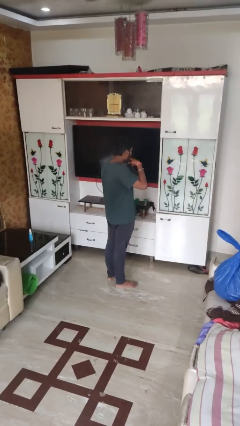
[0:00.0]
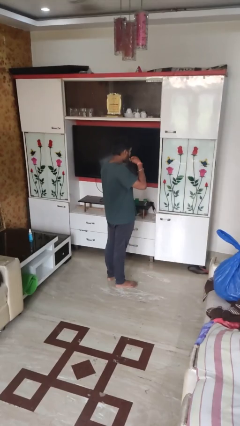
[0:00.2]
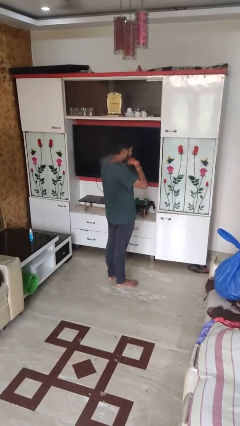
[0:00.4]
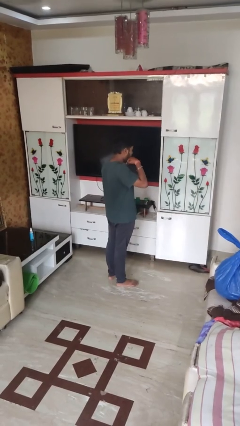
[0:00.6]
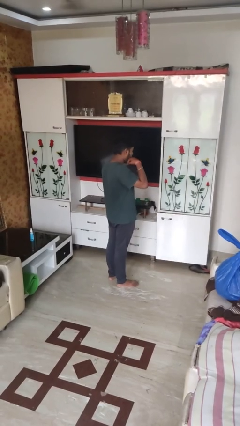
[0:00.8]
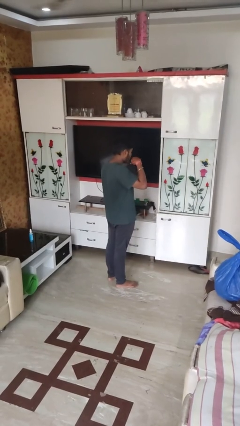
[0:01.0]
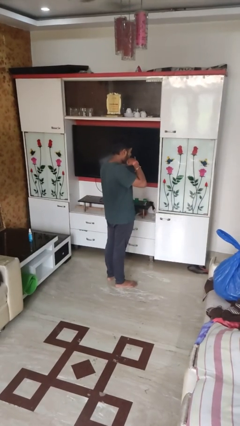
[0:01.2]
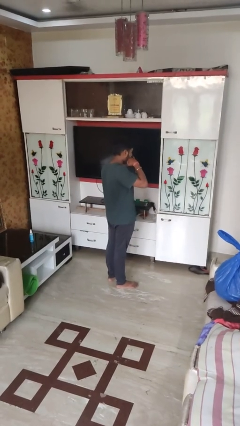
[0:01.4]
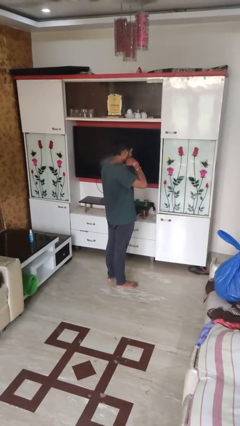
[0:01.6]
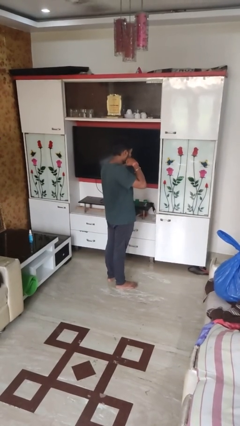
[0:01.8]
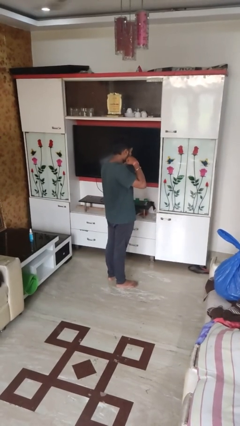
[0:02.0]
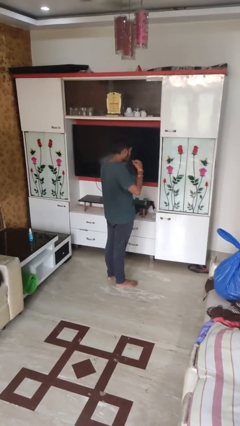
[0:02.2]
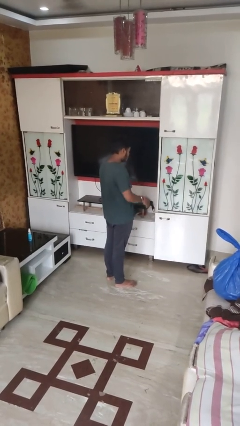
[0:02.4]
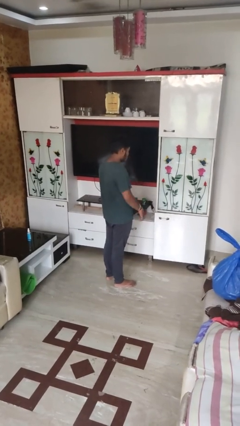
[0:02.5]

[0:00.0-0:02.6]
person licks fingers

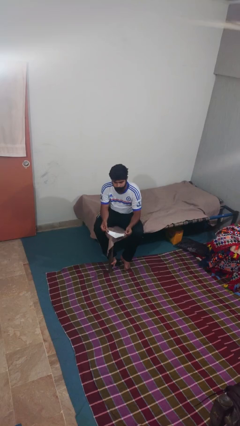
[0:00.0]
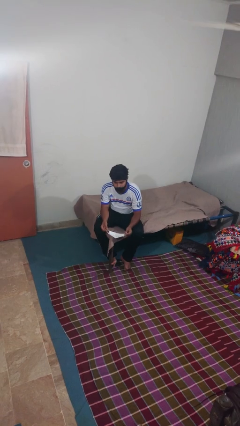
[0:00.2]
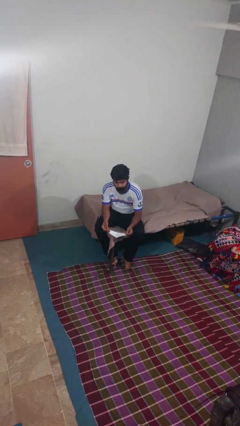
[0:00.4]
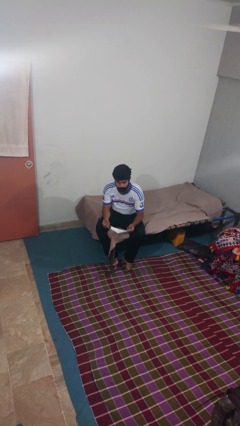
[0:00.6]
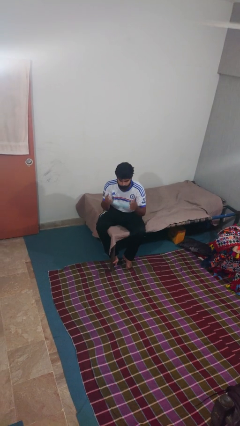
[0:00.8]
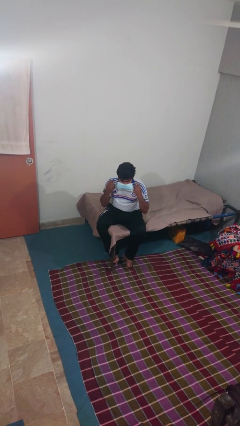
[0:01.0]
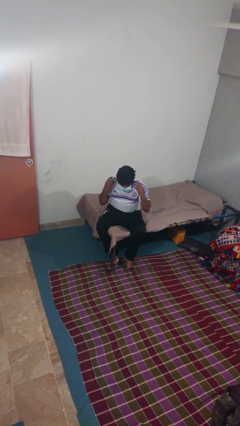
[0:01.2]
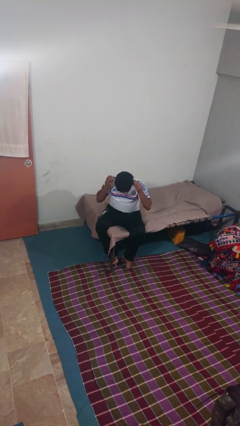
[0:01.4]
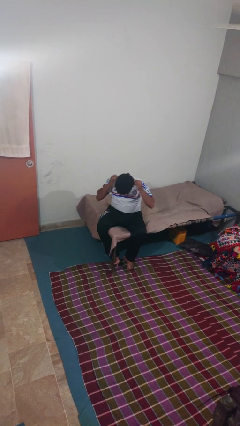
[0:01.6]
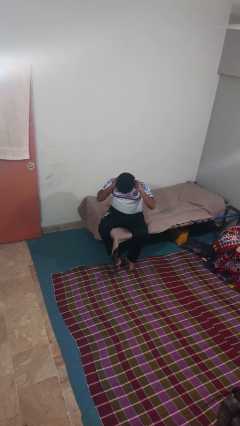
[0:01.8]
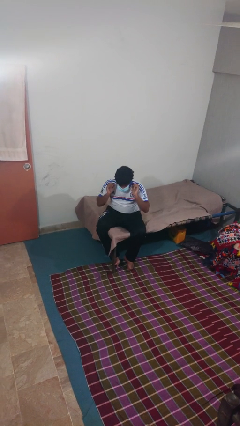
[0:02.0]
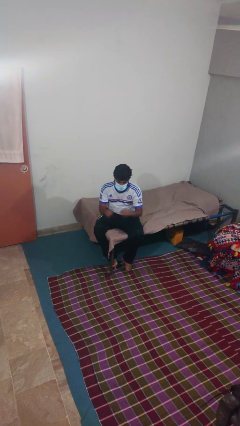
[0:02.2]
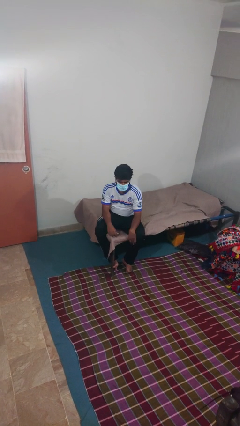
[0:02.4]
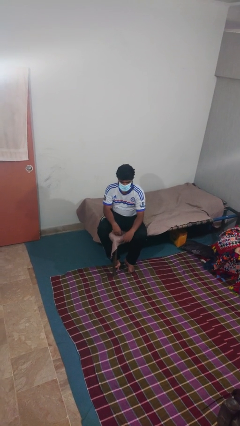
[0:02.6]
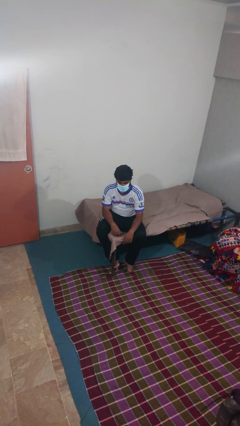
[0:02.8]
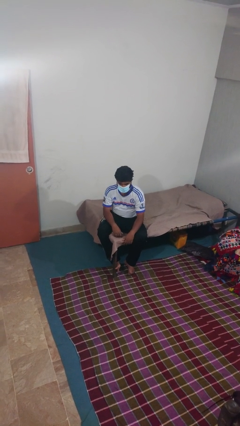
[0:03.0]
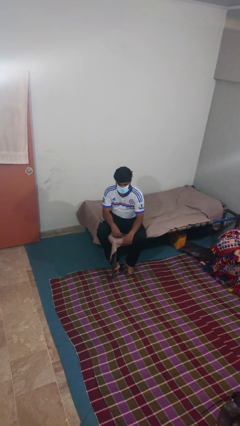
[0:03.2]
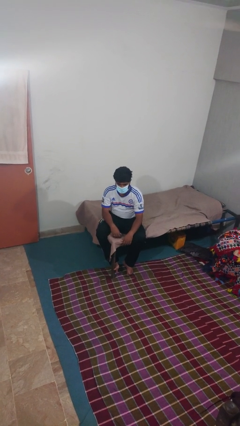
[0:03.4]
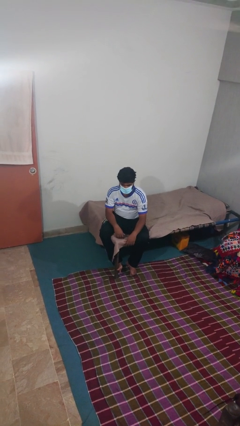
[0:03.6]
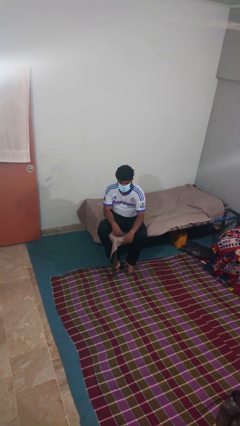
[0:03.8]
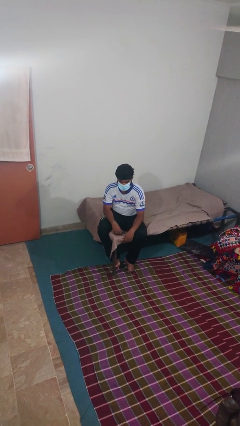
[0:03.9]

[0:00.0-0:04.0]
person puts on facemask

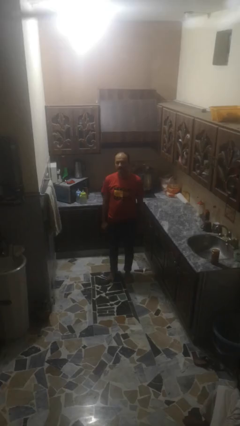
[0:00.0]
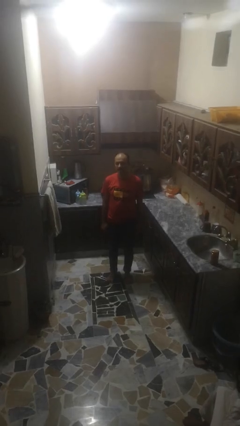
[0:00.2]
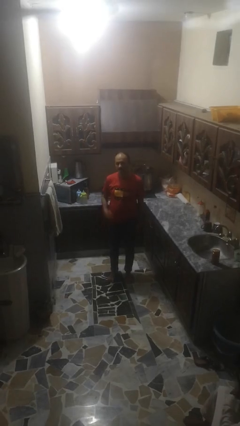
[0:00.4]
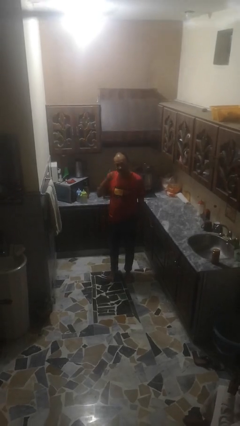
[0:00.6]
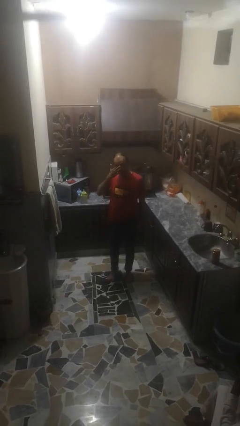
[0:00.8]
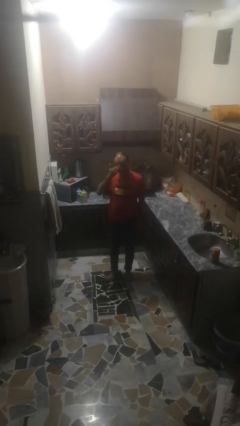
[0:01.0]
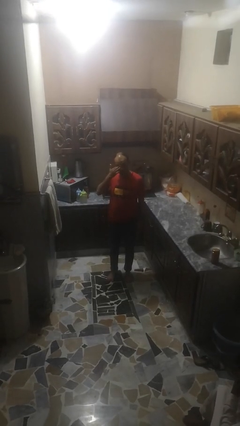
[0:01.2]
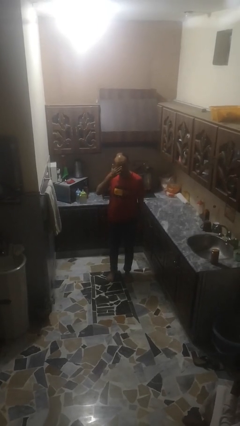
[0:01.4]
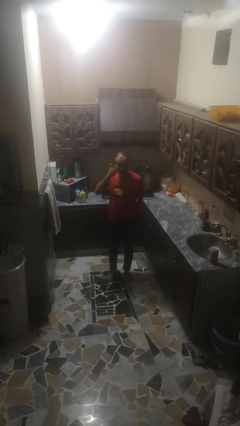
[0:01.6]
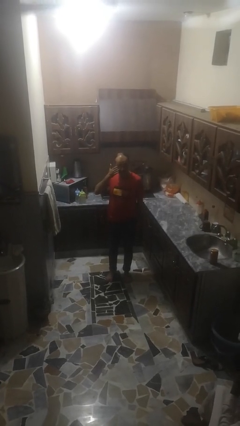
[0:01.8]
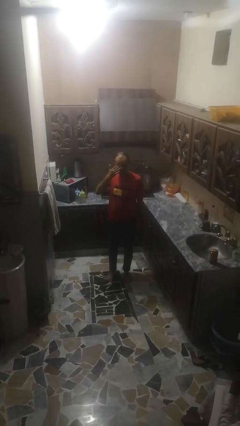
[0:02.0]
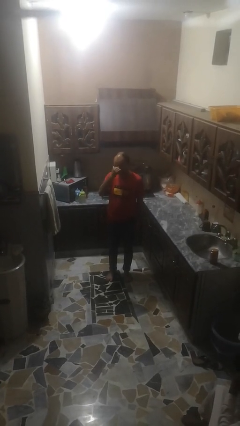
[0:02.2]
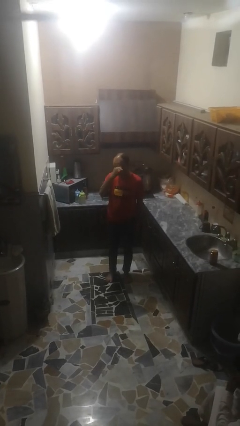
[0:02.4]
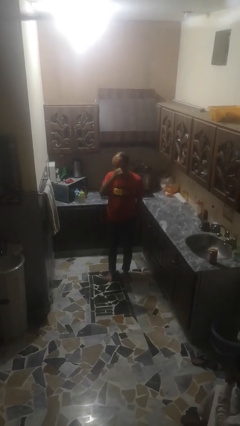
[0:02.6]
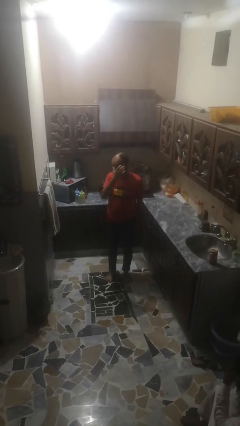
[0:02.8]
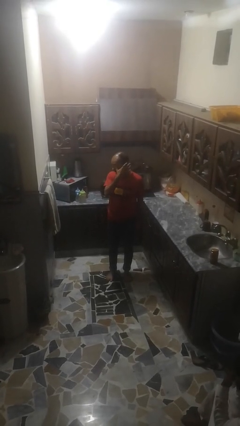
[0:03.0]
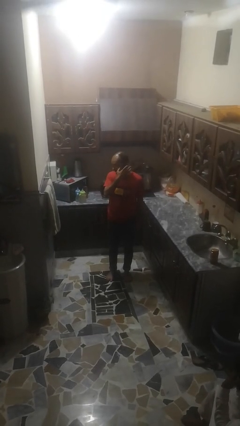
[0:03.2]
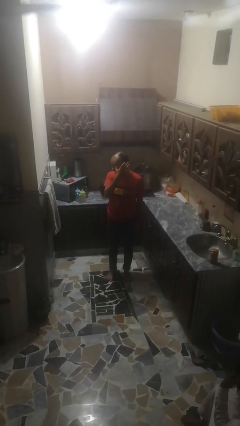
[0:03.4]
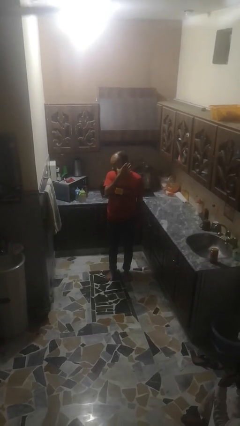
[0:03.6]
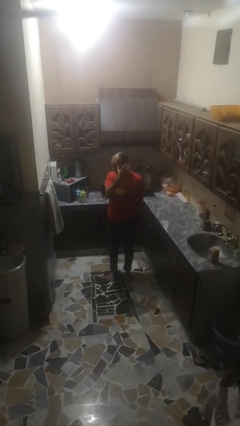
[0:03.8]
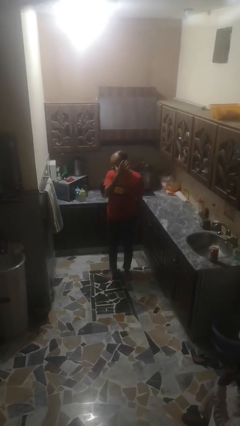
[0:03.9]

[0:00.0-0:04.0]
person rubs eyes

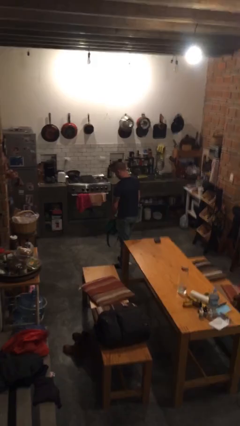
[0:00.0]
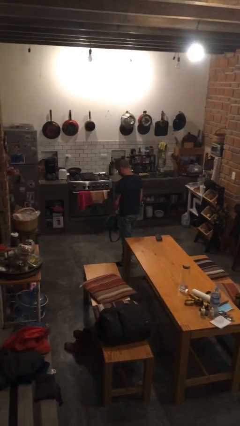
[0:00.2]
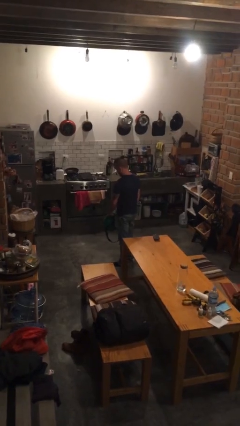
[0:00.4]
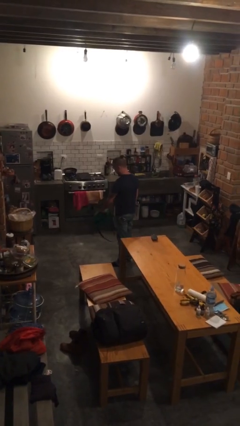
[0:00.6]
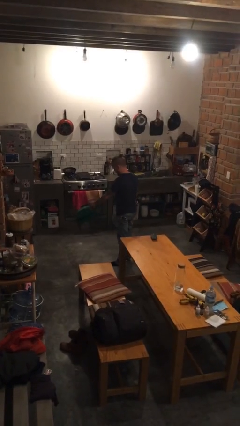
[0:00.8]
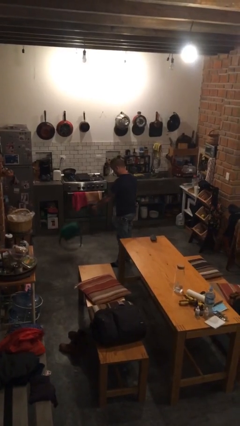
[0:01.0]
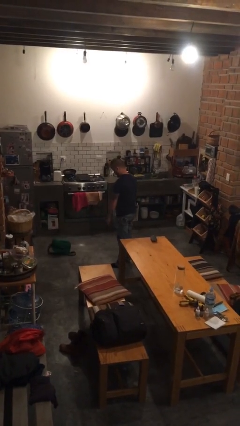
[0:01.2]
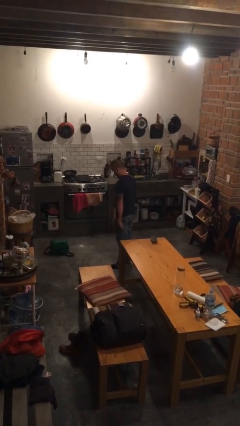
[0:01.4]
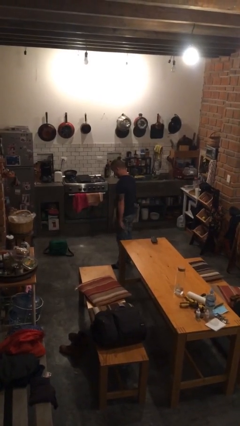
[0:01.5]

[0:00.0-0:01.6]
person throws object to ground

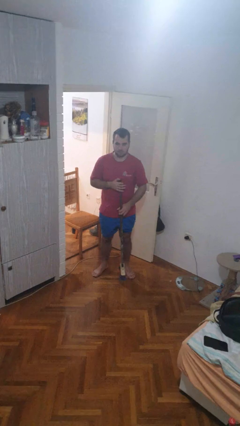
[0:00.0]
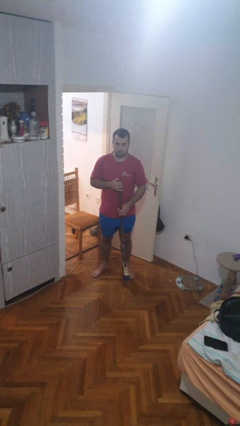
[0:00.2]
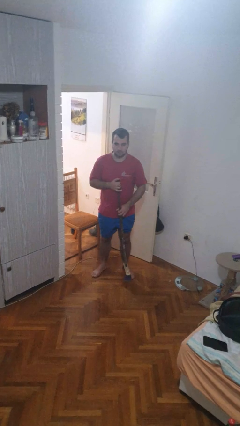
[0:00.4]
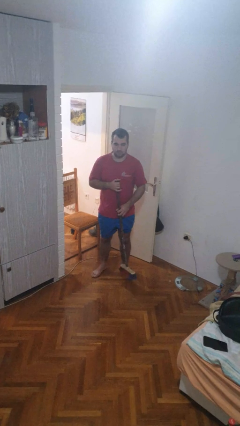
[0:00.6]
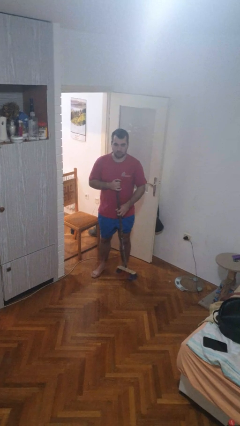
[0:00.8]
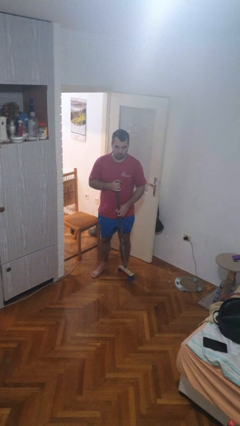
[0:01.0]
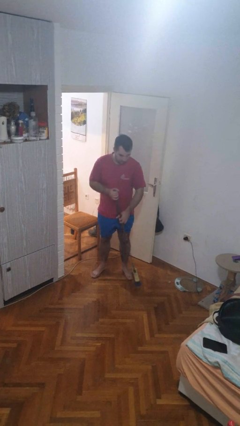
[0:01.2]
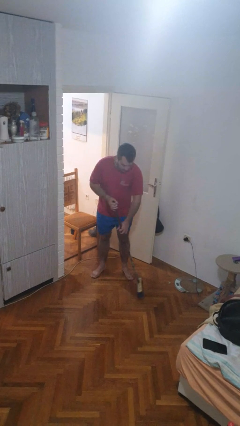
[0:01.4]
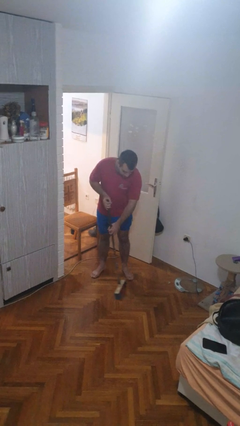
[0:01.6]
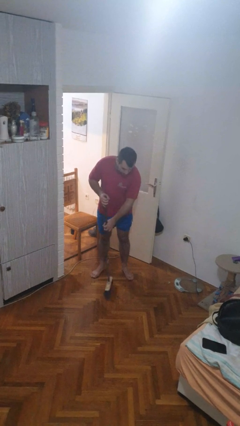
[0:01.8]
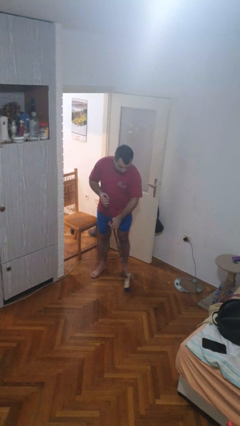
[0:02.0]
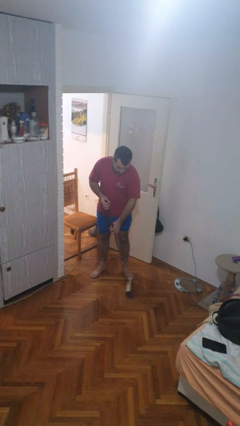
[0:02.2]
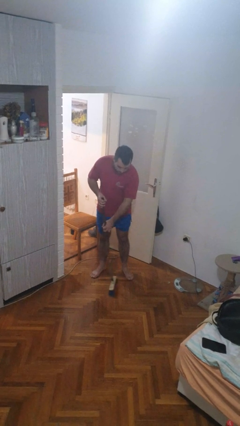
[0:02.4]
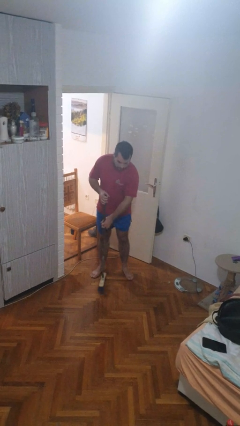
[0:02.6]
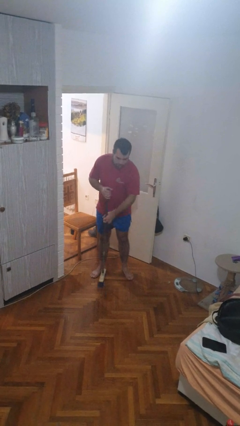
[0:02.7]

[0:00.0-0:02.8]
person sweeps floor

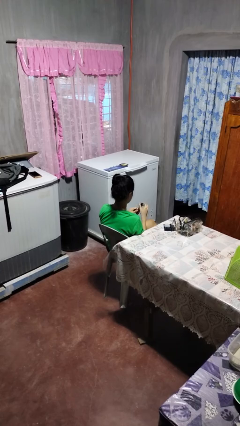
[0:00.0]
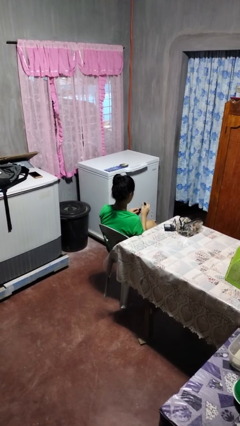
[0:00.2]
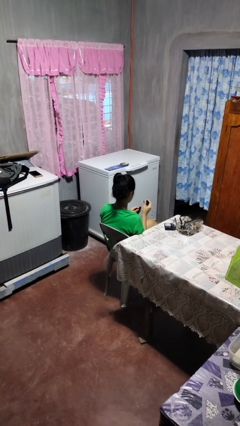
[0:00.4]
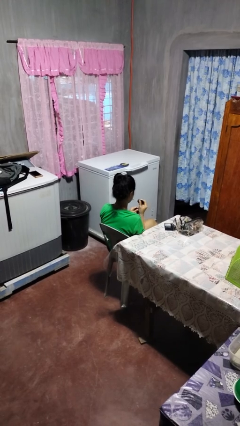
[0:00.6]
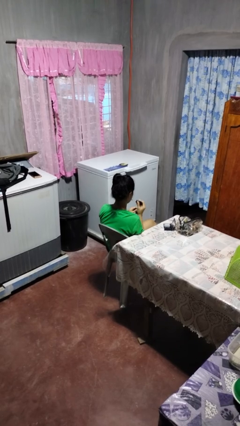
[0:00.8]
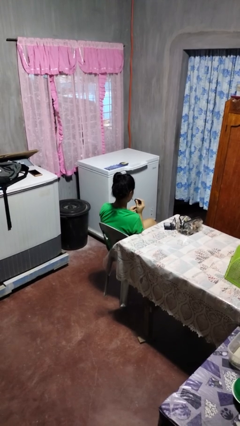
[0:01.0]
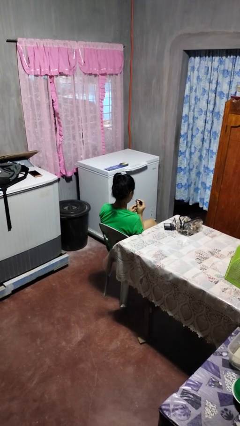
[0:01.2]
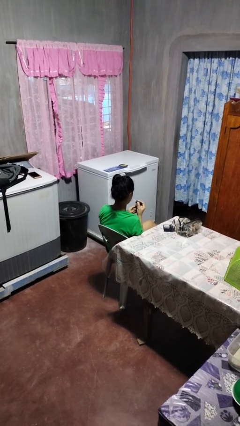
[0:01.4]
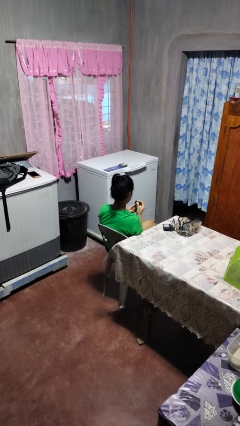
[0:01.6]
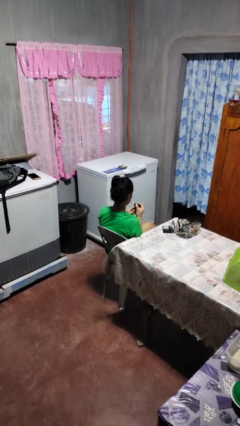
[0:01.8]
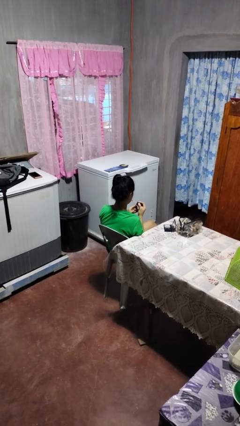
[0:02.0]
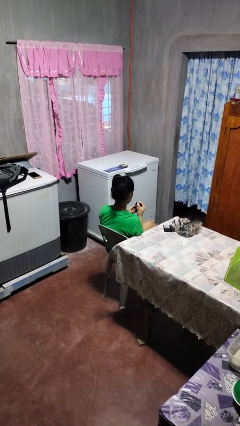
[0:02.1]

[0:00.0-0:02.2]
person applies lip makeup

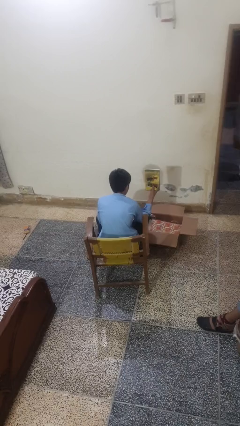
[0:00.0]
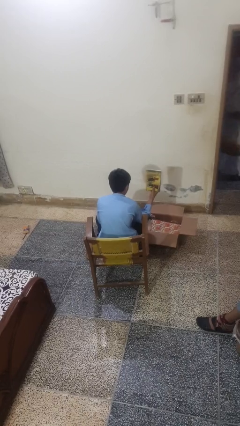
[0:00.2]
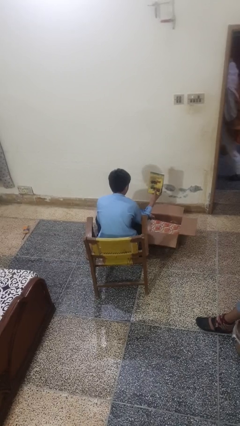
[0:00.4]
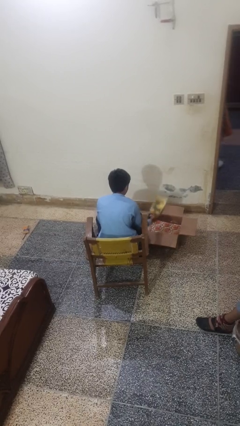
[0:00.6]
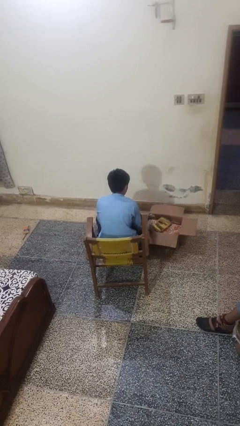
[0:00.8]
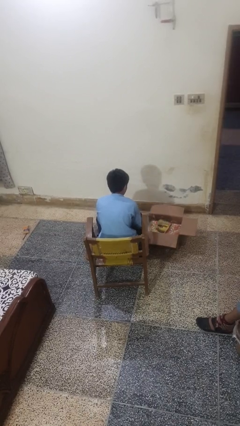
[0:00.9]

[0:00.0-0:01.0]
person puts object into box
